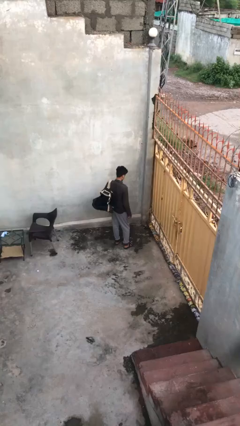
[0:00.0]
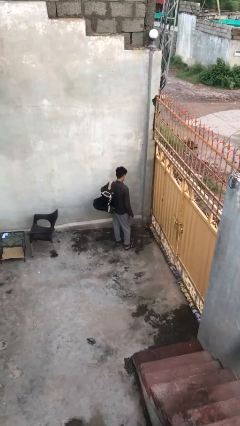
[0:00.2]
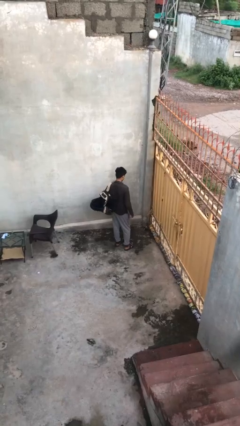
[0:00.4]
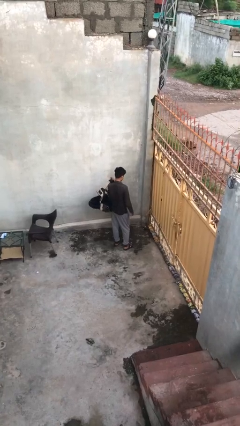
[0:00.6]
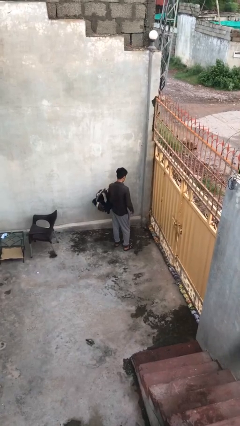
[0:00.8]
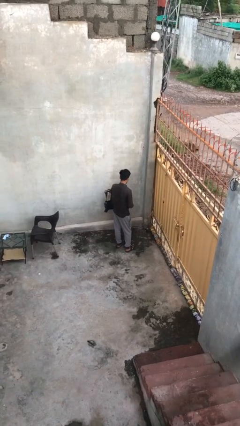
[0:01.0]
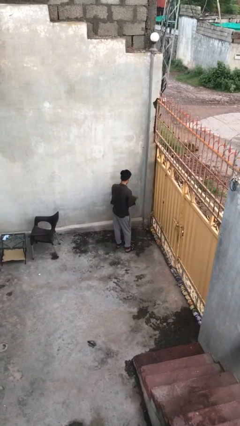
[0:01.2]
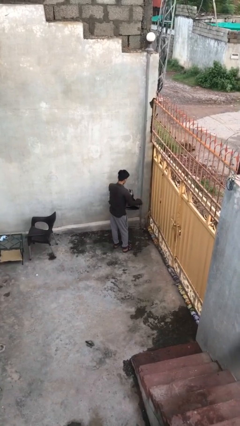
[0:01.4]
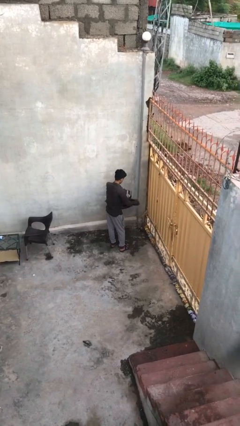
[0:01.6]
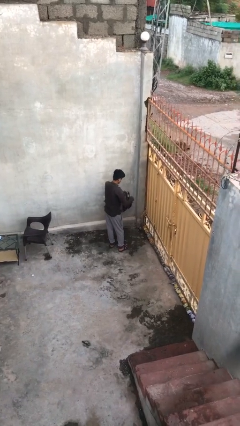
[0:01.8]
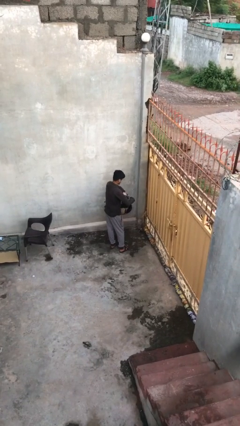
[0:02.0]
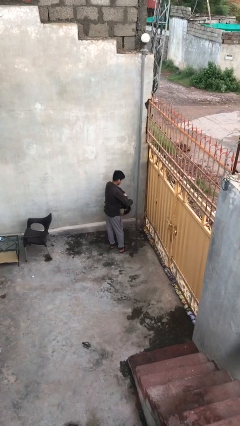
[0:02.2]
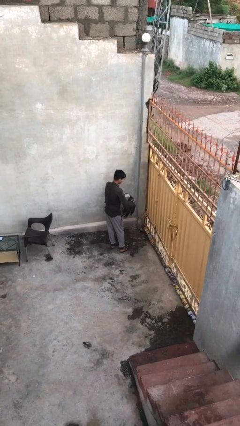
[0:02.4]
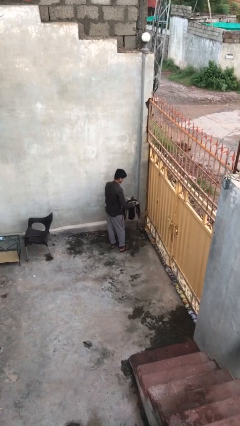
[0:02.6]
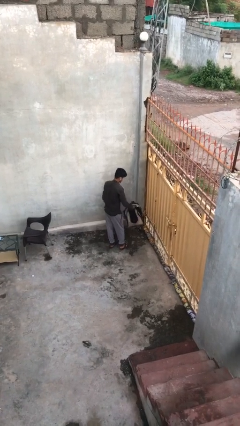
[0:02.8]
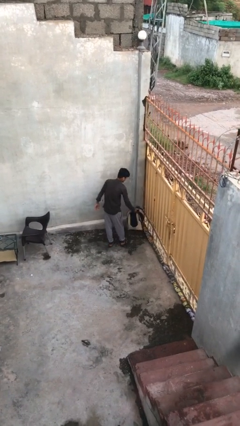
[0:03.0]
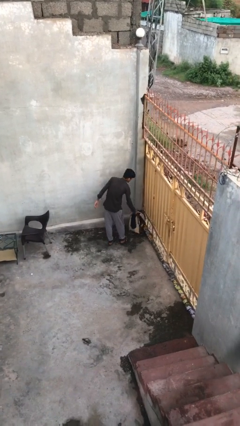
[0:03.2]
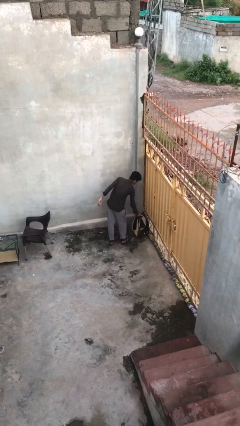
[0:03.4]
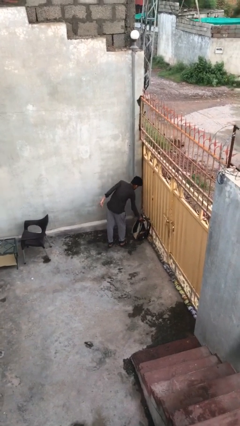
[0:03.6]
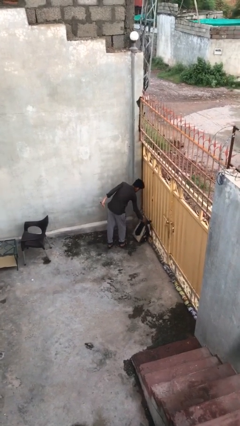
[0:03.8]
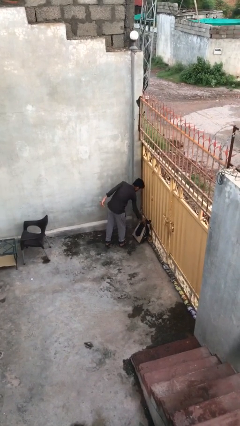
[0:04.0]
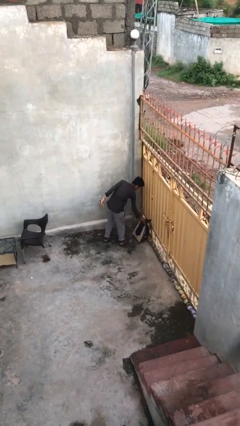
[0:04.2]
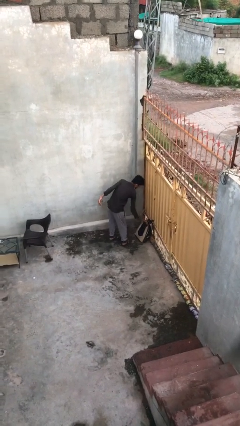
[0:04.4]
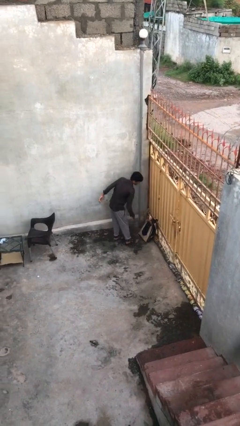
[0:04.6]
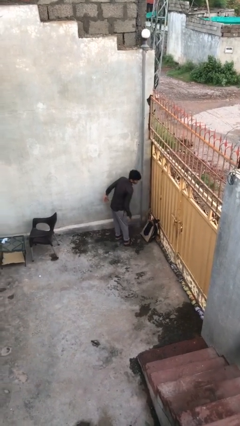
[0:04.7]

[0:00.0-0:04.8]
person puts down object on floor

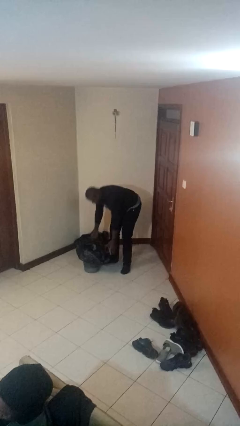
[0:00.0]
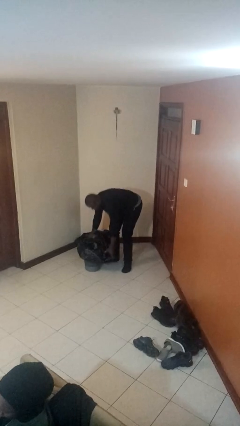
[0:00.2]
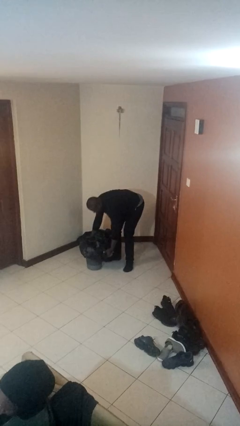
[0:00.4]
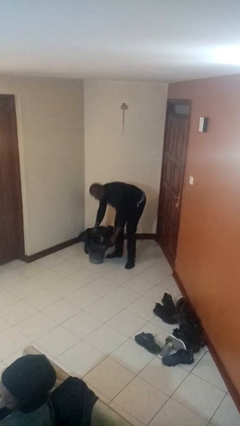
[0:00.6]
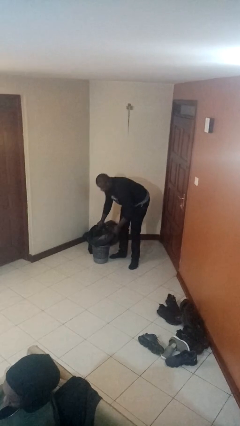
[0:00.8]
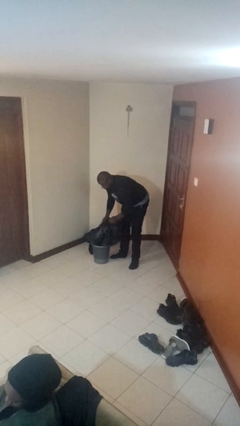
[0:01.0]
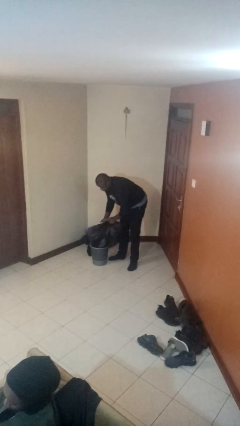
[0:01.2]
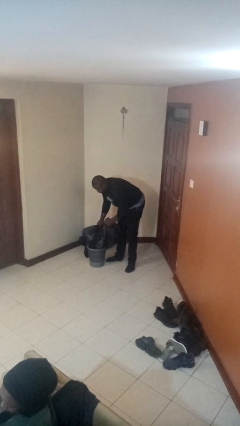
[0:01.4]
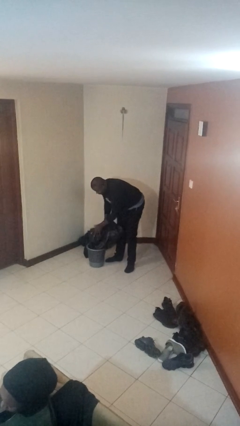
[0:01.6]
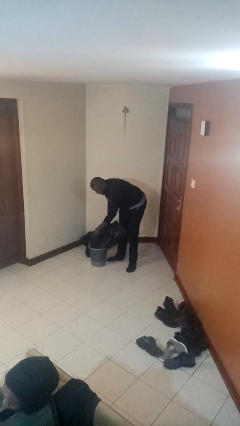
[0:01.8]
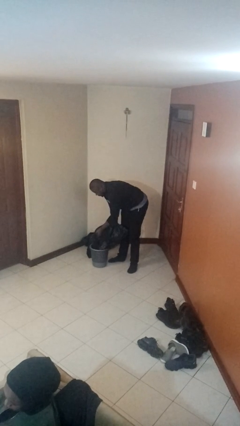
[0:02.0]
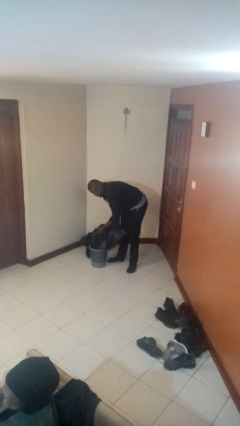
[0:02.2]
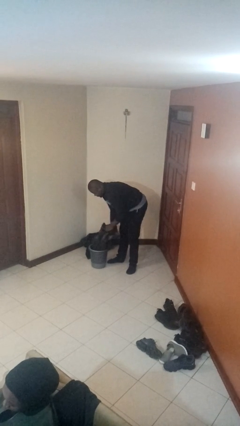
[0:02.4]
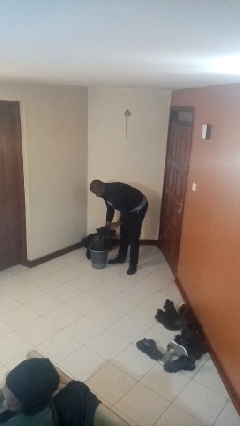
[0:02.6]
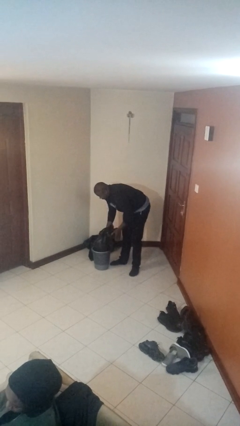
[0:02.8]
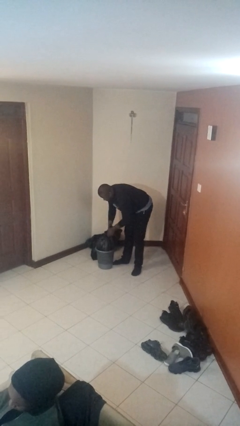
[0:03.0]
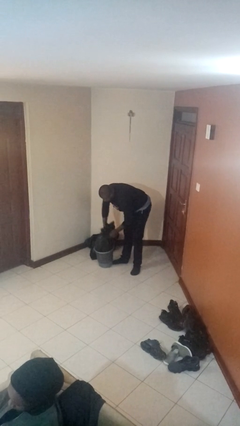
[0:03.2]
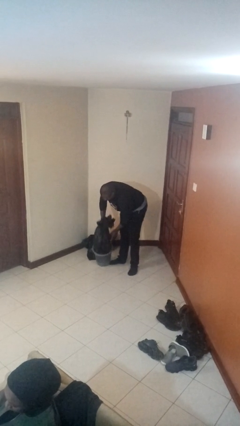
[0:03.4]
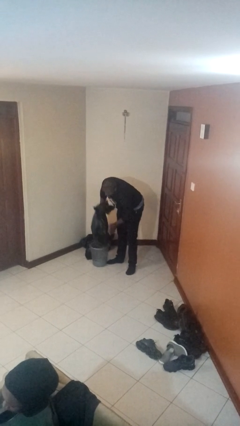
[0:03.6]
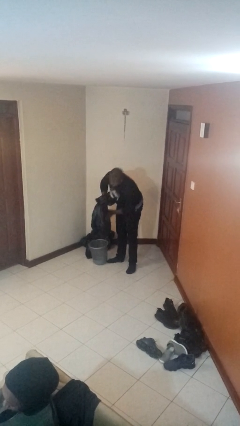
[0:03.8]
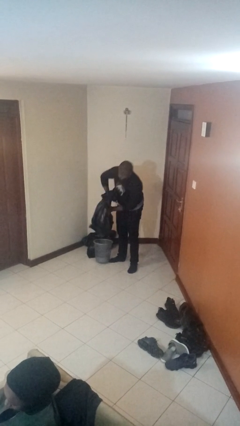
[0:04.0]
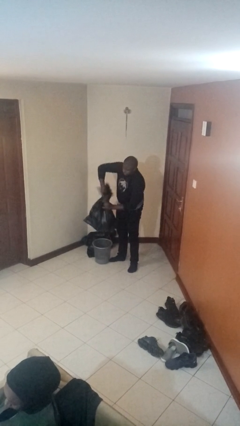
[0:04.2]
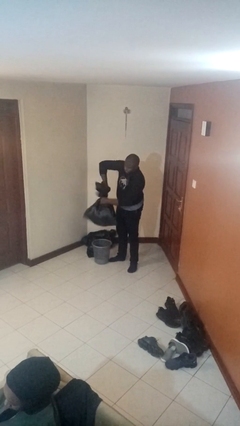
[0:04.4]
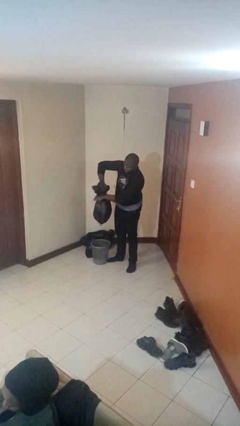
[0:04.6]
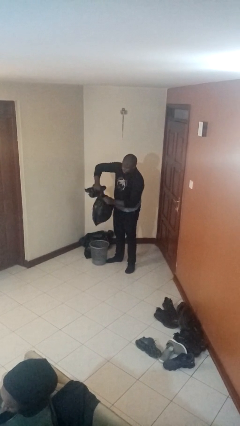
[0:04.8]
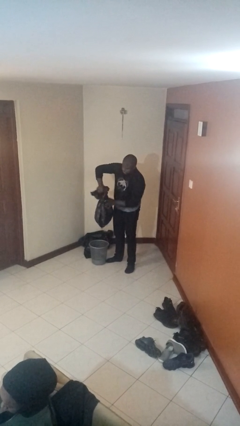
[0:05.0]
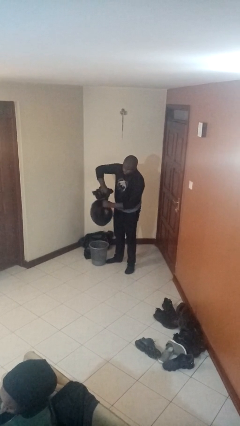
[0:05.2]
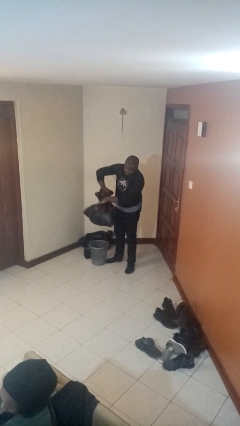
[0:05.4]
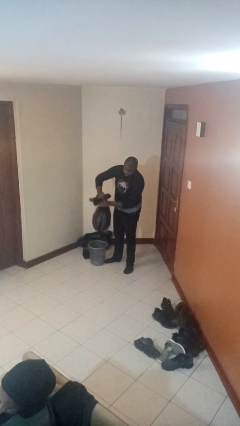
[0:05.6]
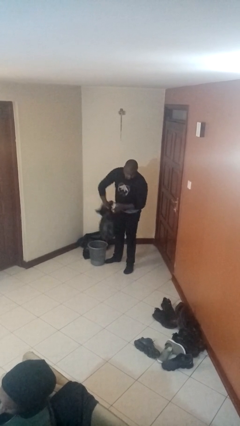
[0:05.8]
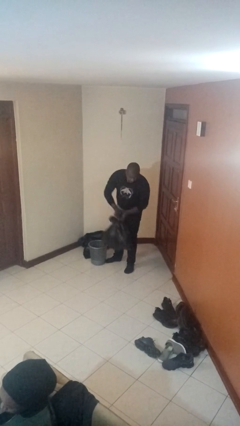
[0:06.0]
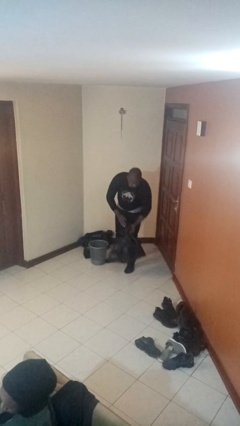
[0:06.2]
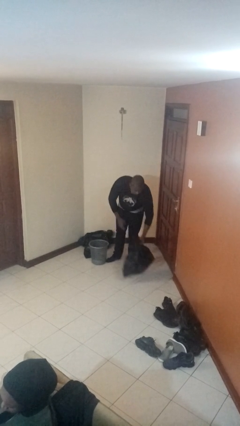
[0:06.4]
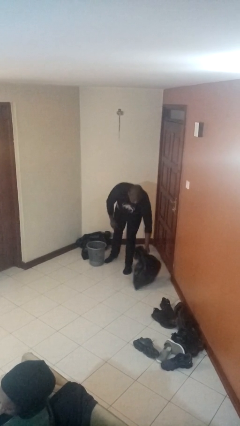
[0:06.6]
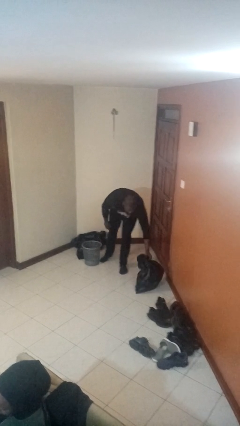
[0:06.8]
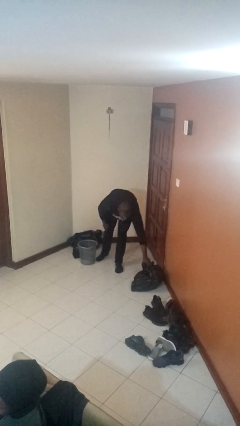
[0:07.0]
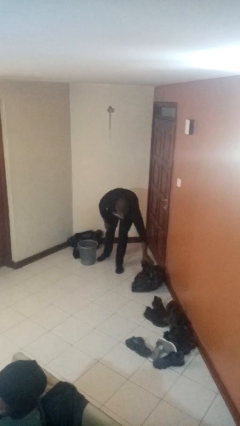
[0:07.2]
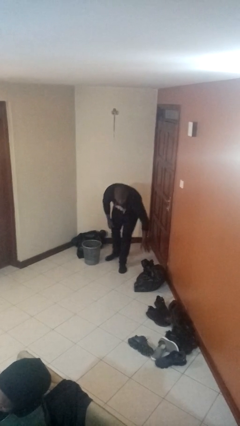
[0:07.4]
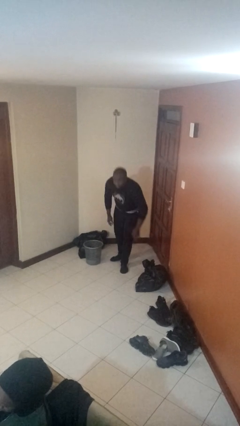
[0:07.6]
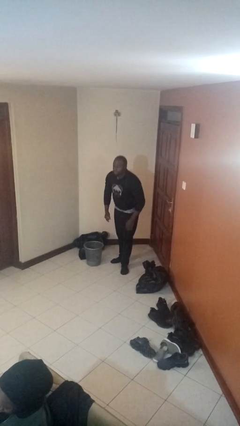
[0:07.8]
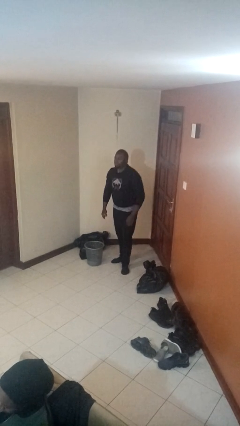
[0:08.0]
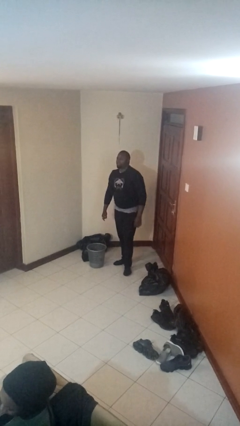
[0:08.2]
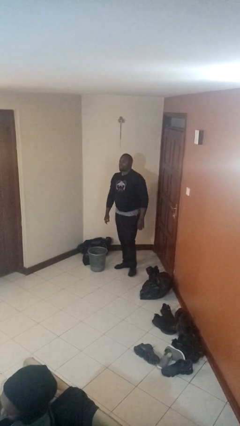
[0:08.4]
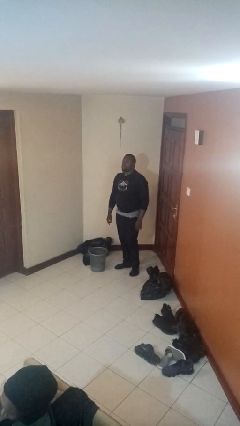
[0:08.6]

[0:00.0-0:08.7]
person removes trashbag from trashcan

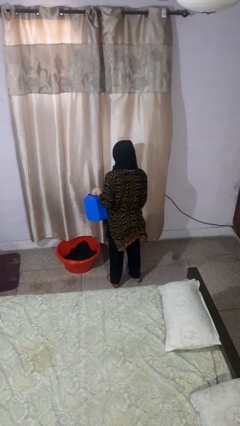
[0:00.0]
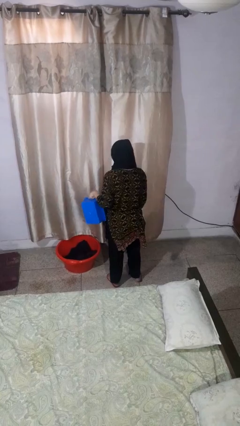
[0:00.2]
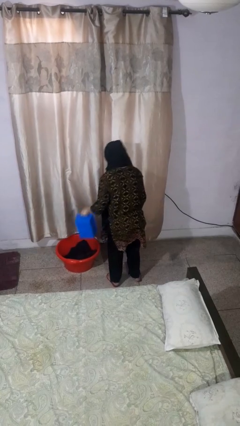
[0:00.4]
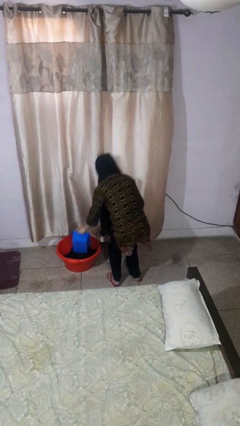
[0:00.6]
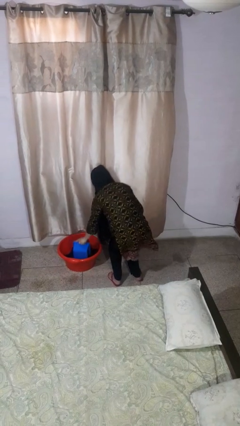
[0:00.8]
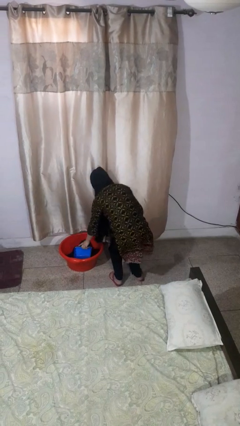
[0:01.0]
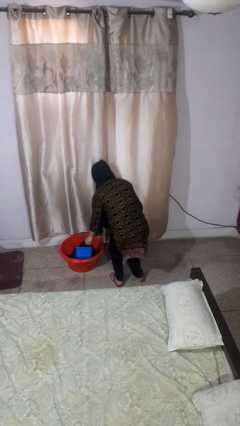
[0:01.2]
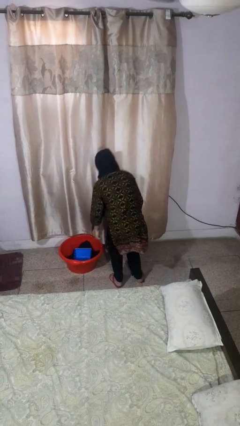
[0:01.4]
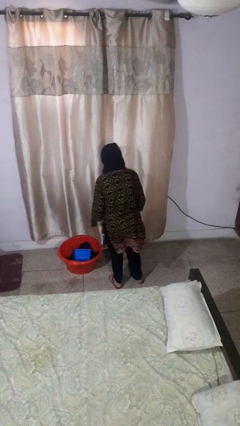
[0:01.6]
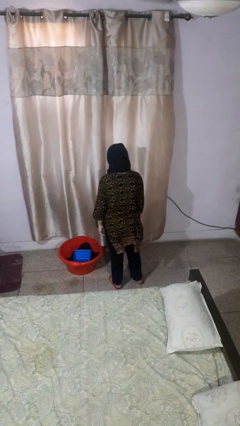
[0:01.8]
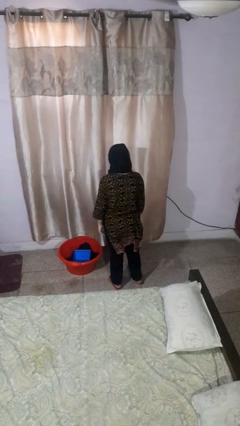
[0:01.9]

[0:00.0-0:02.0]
person puts object into basket

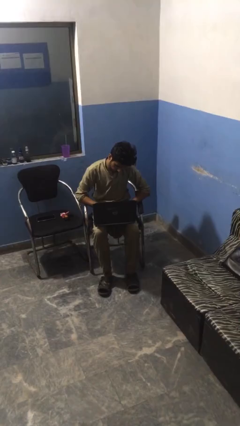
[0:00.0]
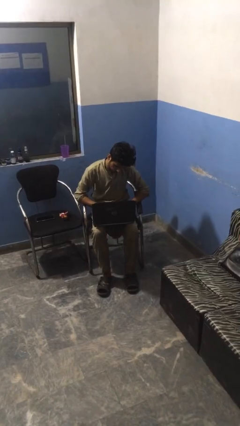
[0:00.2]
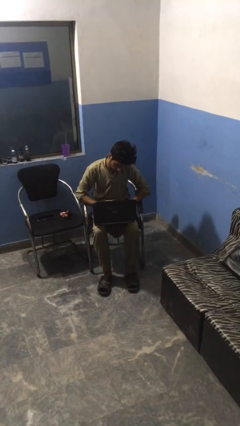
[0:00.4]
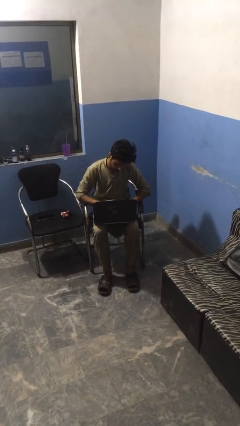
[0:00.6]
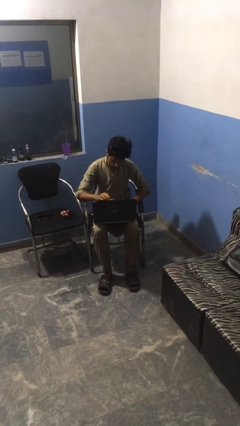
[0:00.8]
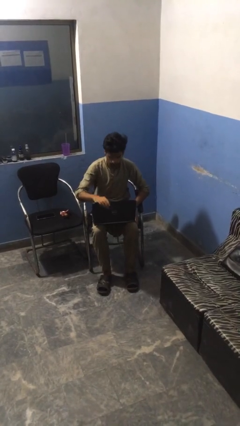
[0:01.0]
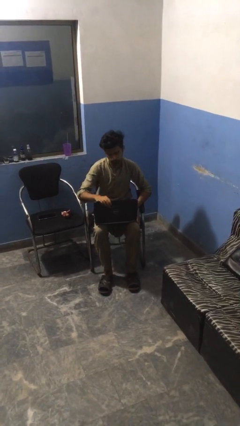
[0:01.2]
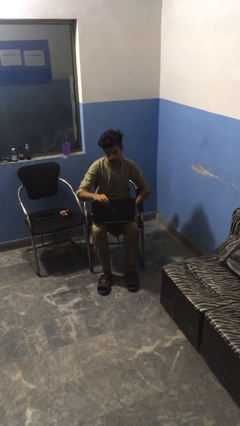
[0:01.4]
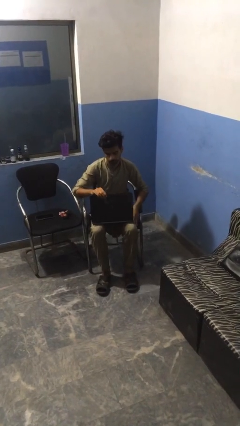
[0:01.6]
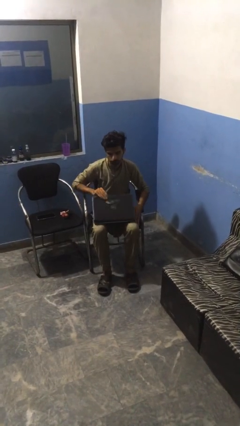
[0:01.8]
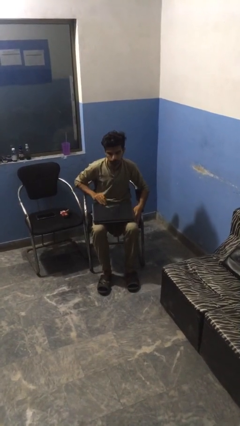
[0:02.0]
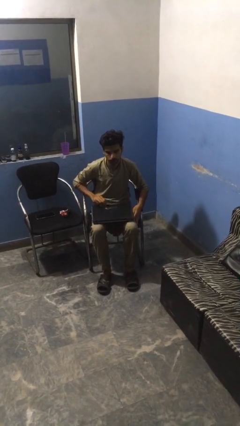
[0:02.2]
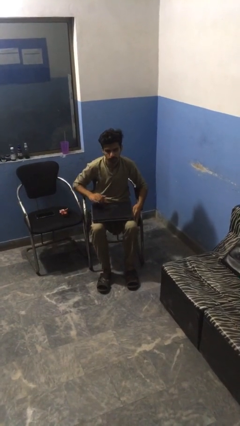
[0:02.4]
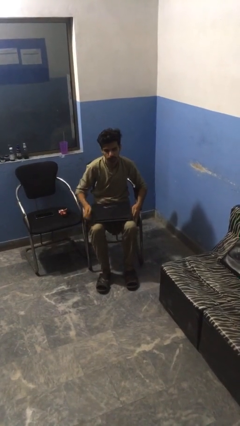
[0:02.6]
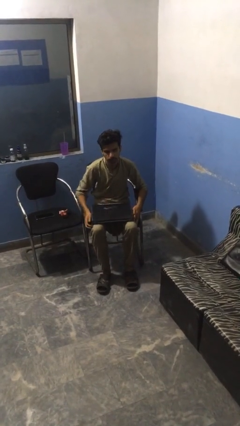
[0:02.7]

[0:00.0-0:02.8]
person closes laptop

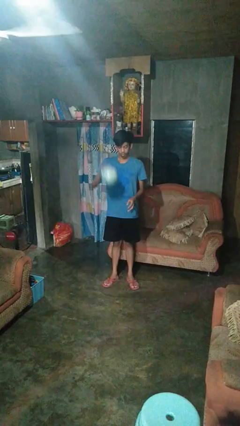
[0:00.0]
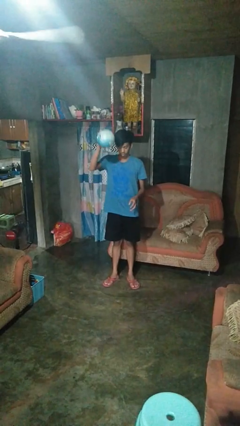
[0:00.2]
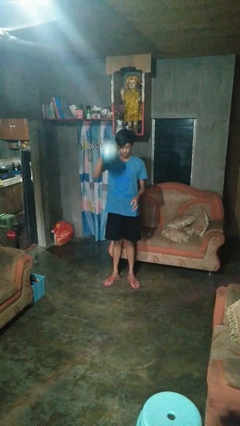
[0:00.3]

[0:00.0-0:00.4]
person bounces ball on floor
